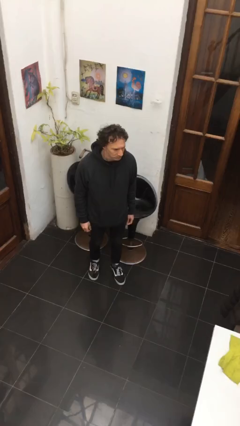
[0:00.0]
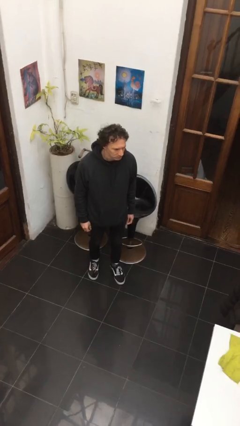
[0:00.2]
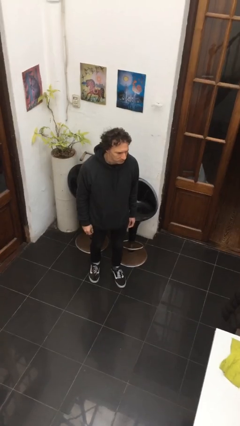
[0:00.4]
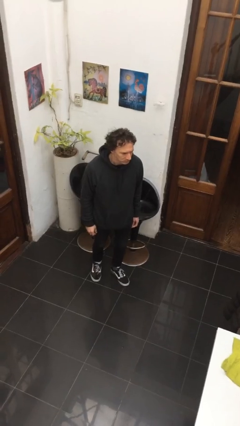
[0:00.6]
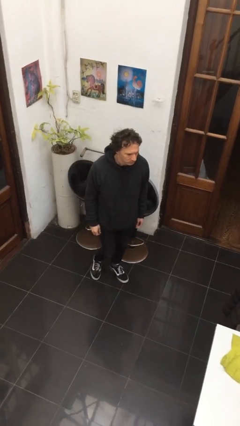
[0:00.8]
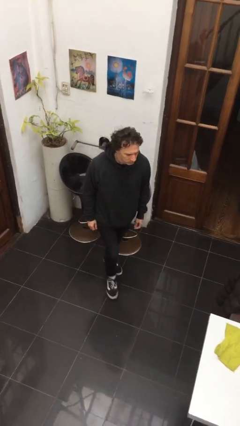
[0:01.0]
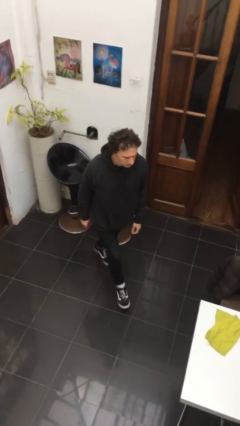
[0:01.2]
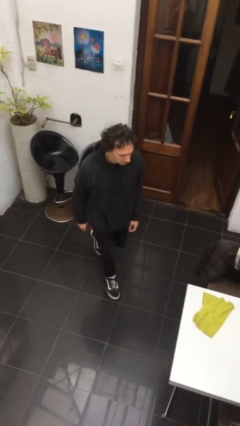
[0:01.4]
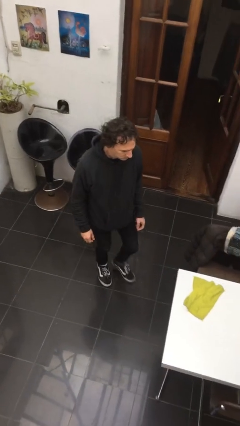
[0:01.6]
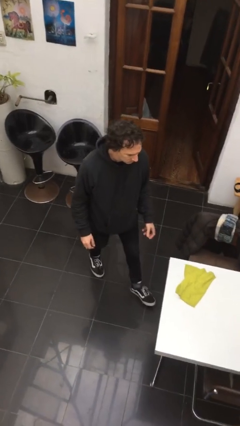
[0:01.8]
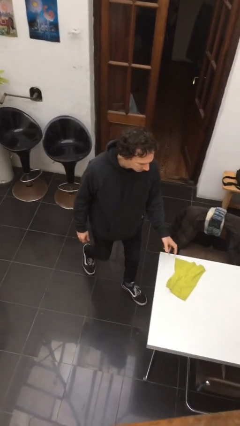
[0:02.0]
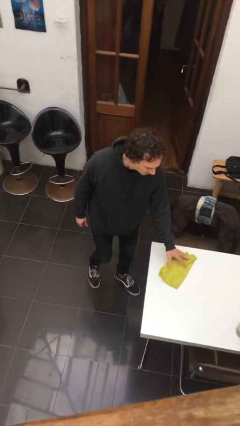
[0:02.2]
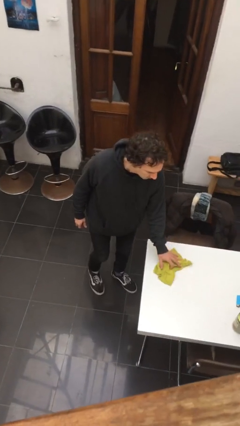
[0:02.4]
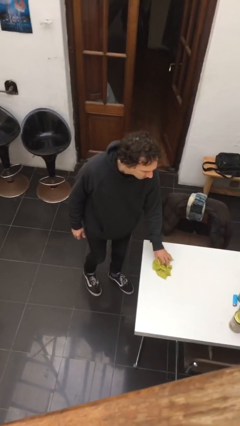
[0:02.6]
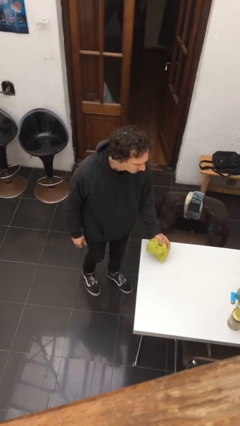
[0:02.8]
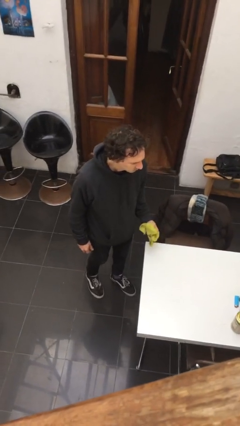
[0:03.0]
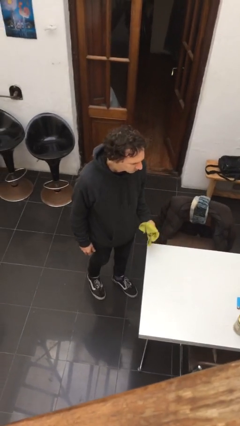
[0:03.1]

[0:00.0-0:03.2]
person picks up object from table

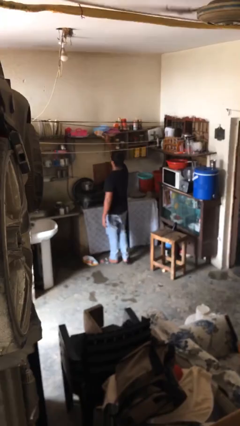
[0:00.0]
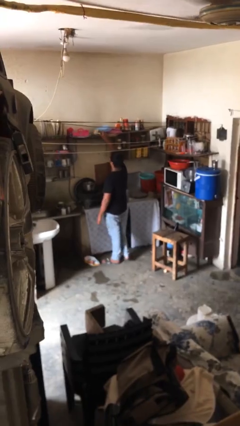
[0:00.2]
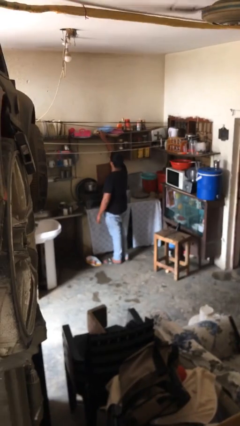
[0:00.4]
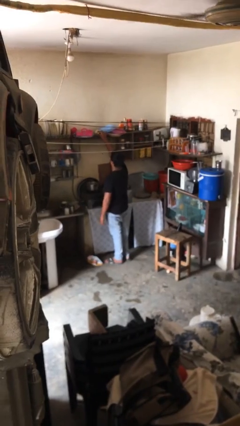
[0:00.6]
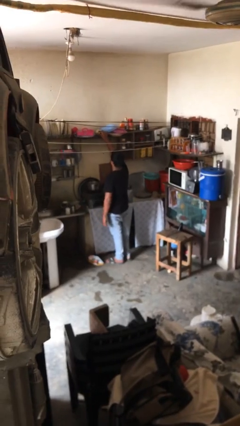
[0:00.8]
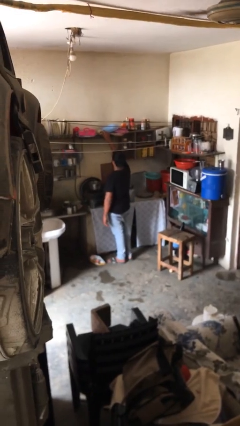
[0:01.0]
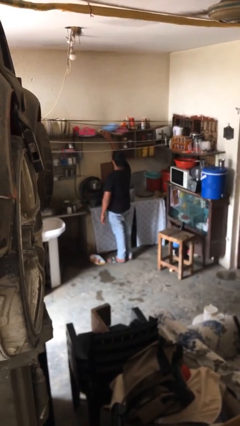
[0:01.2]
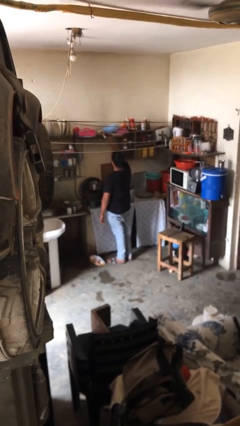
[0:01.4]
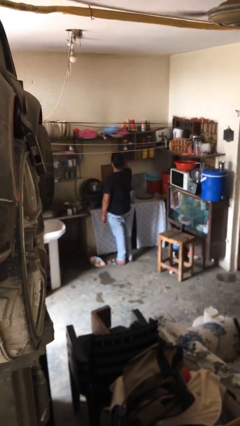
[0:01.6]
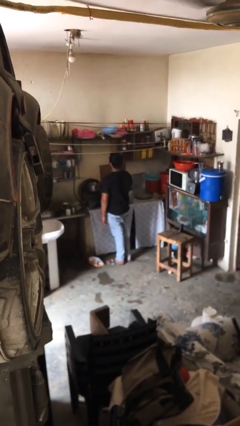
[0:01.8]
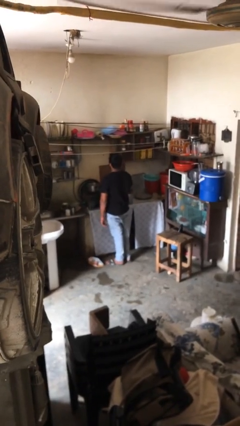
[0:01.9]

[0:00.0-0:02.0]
person puts down object on shelf

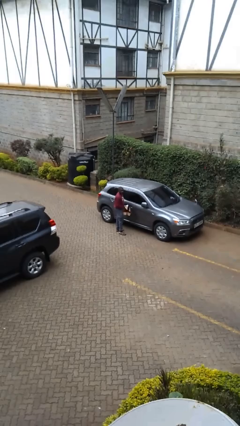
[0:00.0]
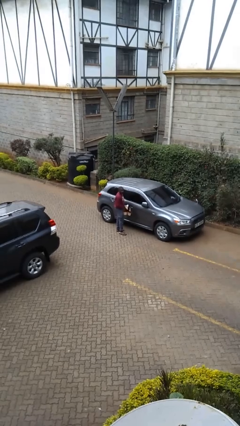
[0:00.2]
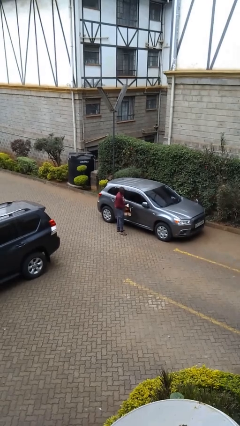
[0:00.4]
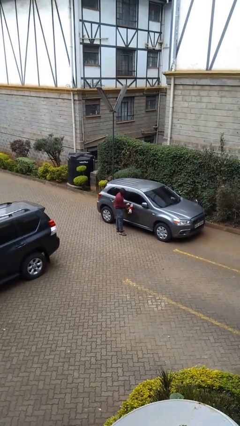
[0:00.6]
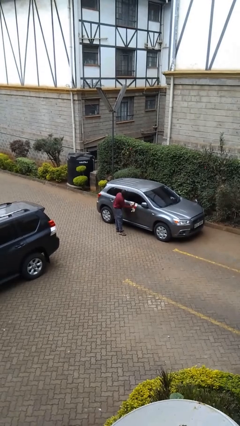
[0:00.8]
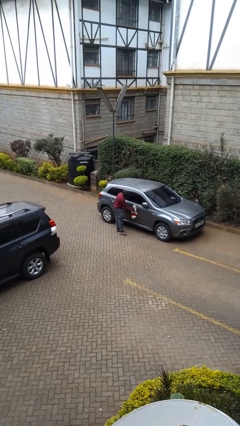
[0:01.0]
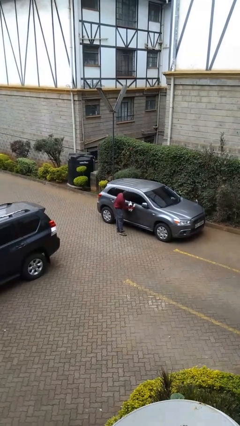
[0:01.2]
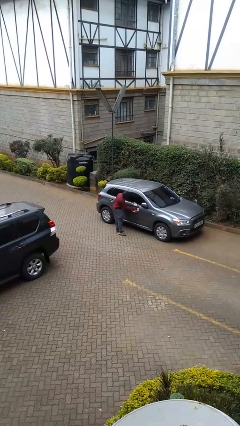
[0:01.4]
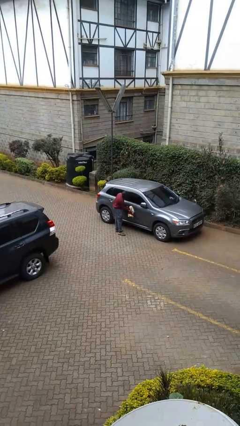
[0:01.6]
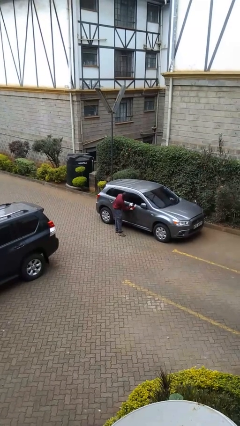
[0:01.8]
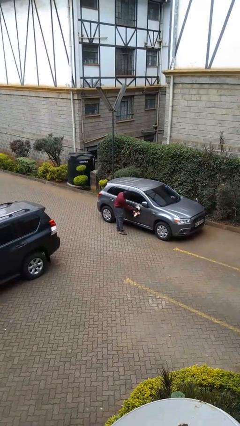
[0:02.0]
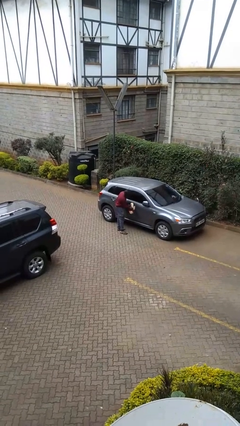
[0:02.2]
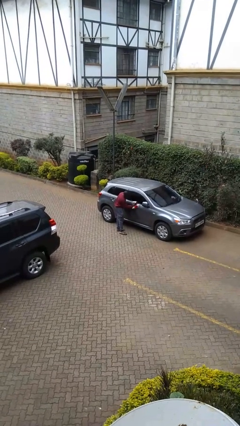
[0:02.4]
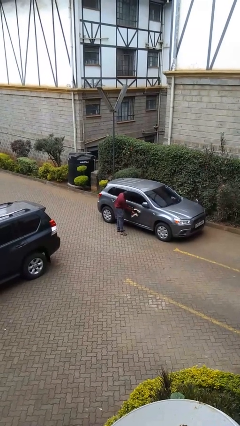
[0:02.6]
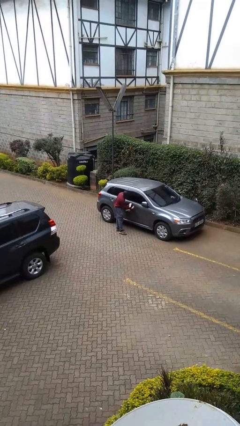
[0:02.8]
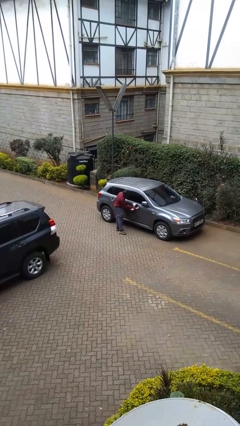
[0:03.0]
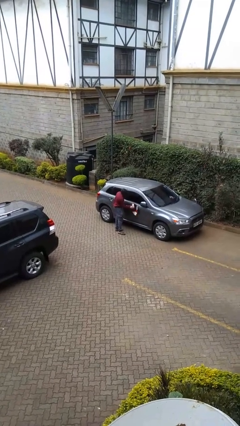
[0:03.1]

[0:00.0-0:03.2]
person polishes car with rag

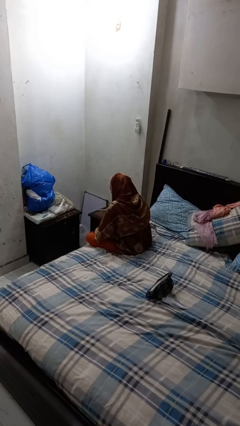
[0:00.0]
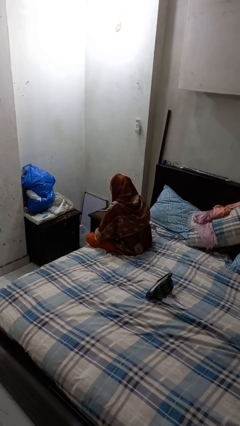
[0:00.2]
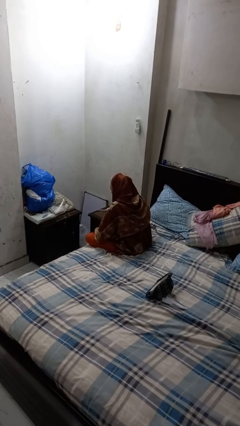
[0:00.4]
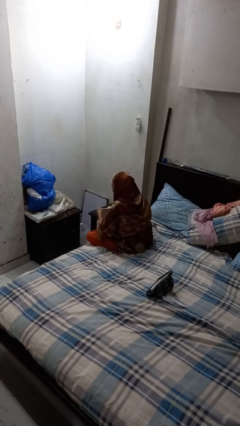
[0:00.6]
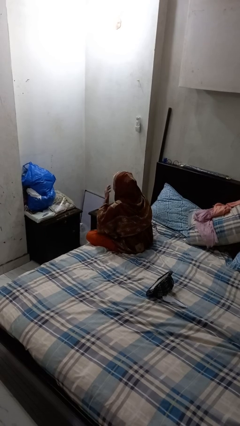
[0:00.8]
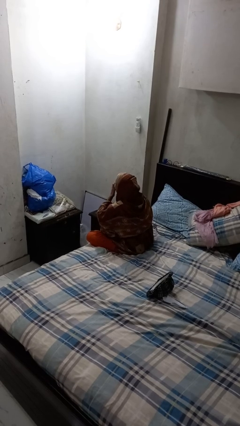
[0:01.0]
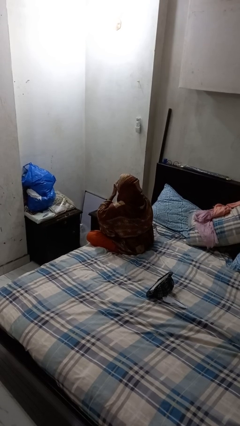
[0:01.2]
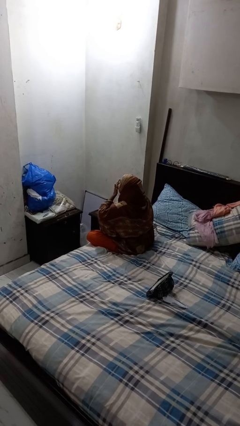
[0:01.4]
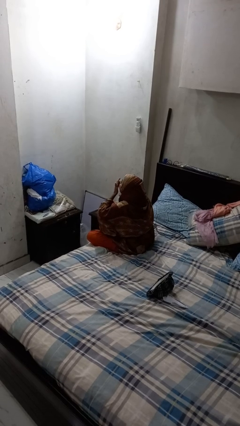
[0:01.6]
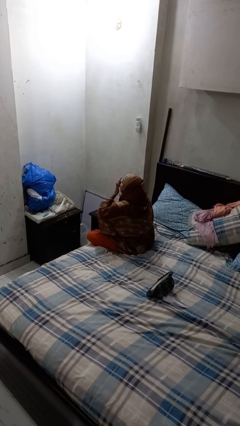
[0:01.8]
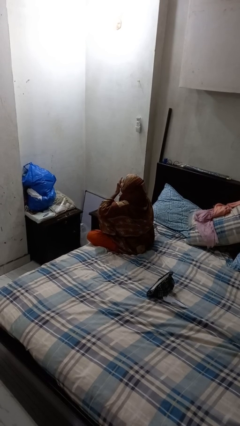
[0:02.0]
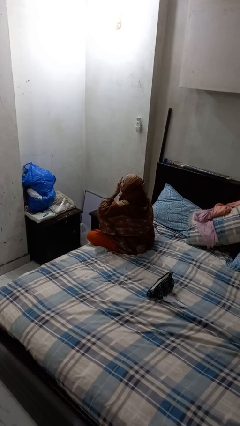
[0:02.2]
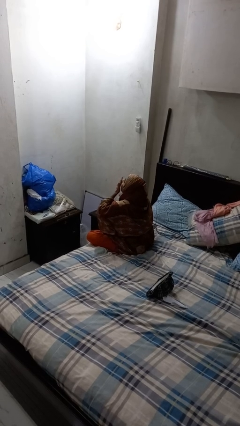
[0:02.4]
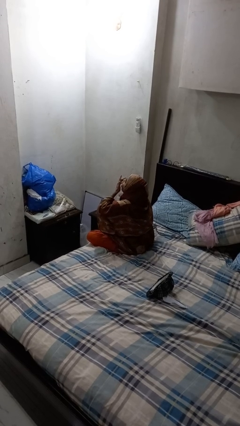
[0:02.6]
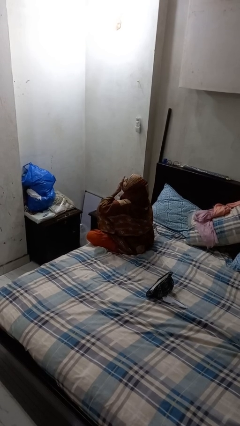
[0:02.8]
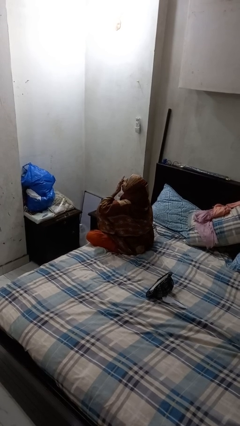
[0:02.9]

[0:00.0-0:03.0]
person yawns

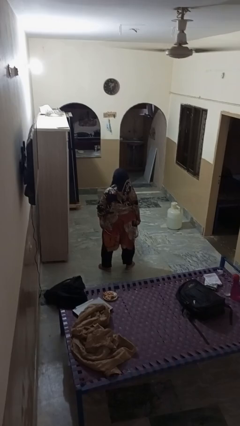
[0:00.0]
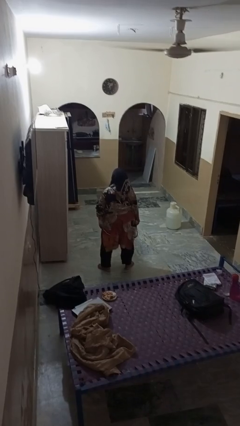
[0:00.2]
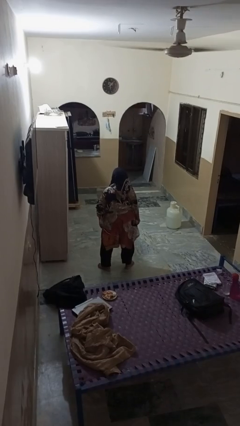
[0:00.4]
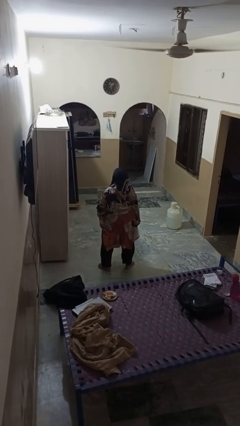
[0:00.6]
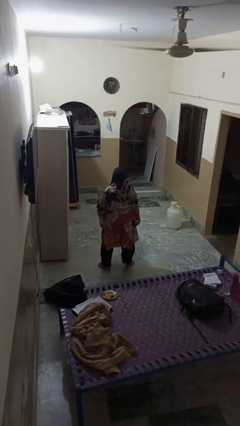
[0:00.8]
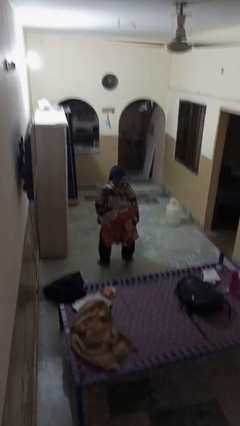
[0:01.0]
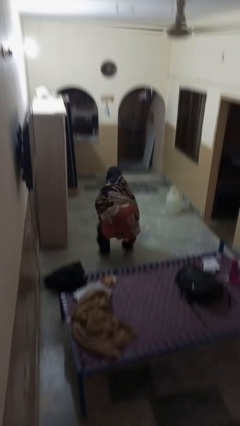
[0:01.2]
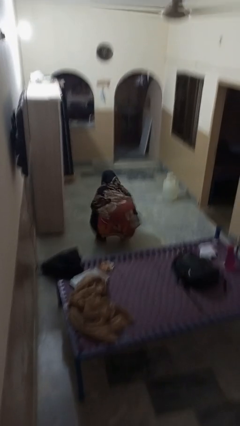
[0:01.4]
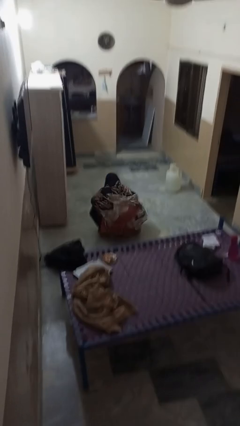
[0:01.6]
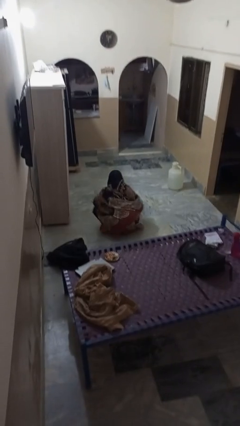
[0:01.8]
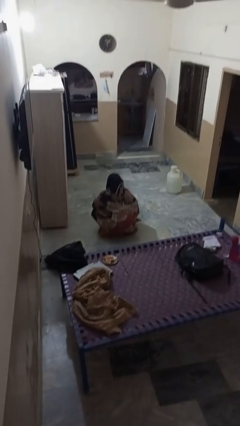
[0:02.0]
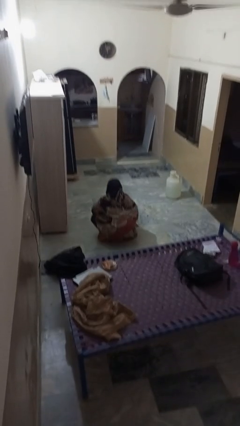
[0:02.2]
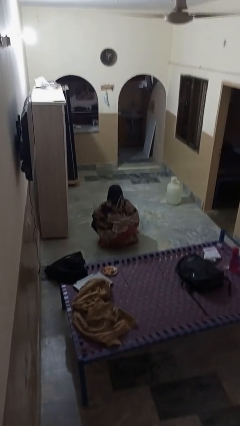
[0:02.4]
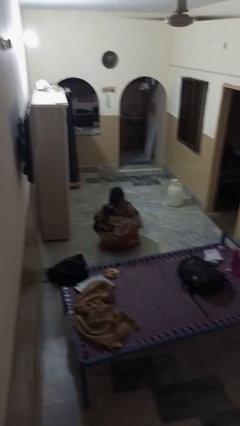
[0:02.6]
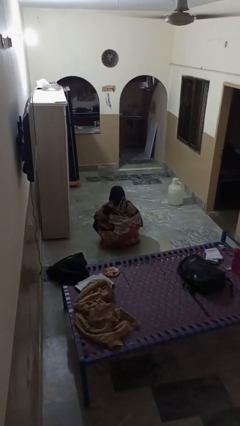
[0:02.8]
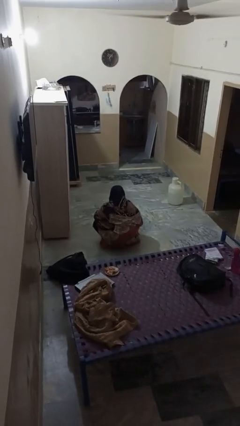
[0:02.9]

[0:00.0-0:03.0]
person squats

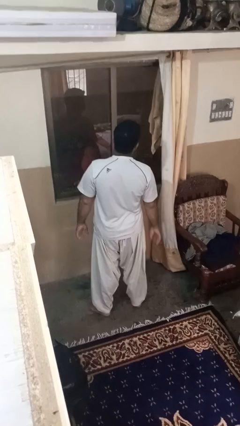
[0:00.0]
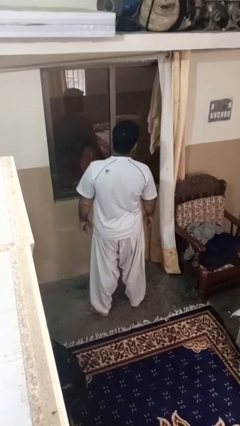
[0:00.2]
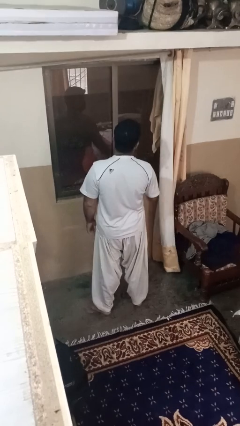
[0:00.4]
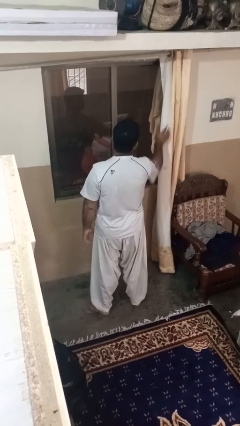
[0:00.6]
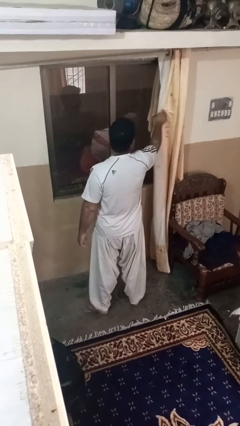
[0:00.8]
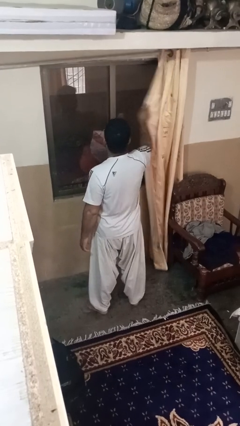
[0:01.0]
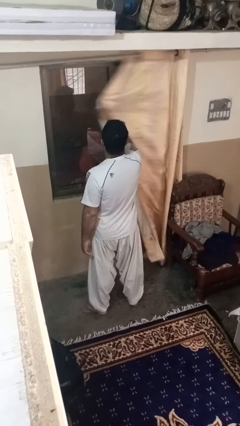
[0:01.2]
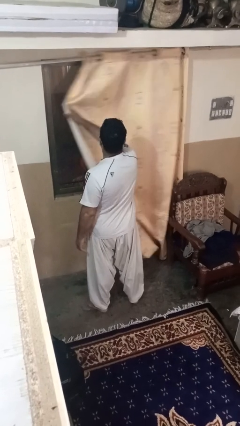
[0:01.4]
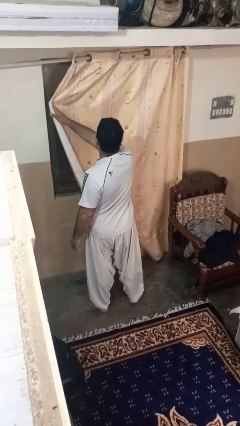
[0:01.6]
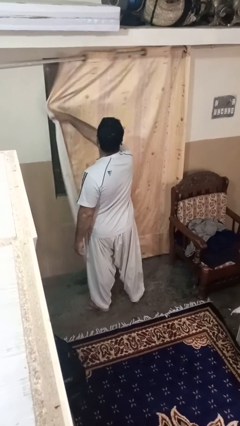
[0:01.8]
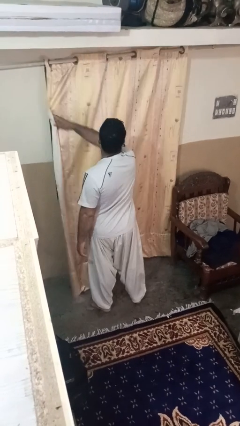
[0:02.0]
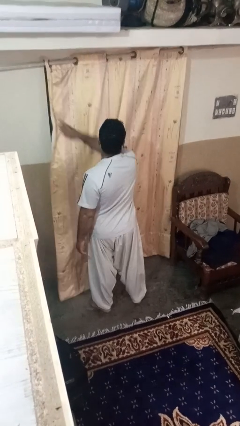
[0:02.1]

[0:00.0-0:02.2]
person closes curtains

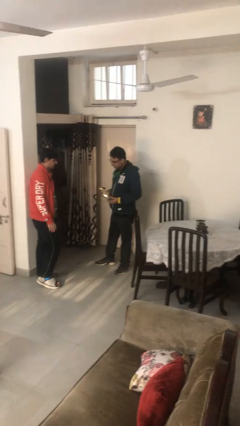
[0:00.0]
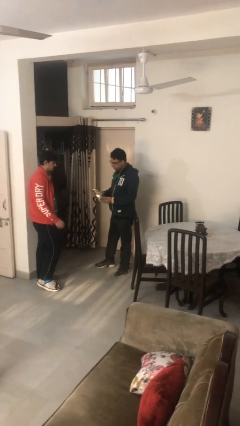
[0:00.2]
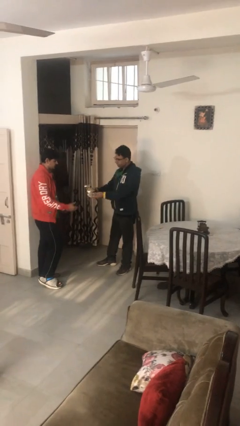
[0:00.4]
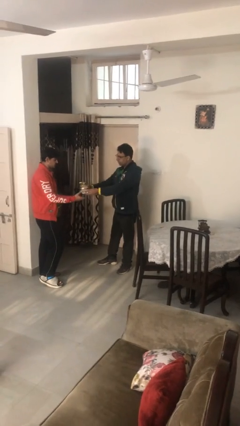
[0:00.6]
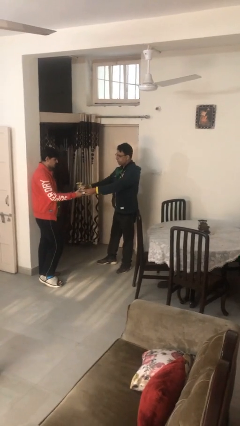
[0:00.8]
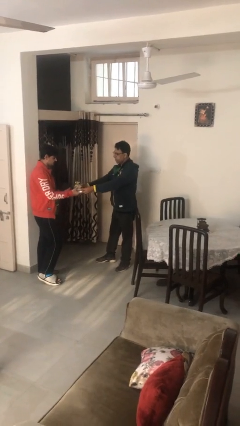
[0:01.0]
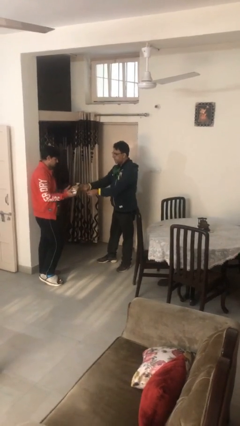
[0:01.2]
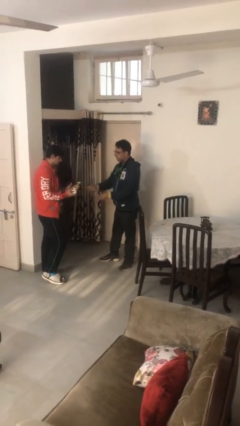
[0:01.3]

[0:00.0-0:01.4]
person transfers object to person
